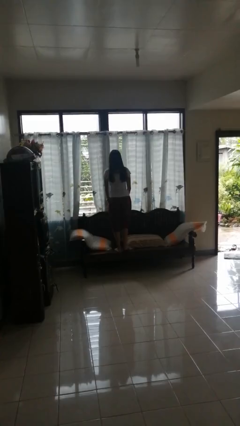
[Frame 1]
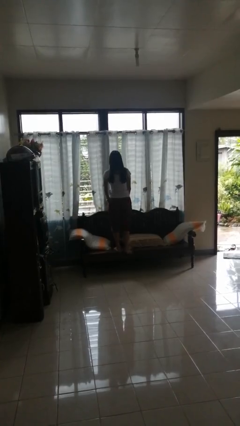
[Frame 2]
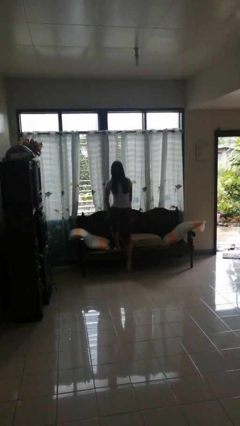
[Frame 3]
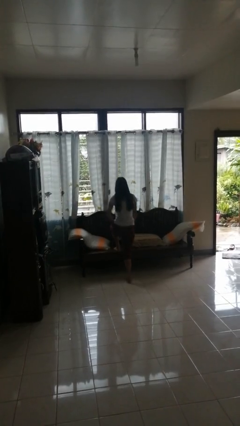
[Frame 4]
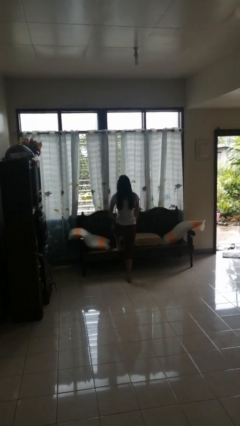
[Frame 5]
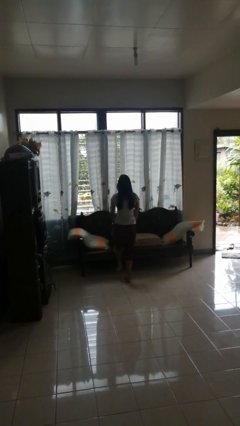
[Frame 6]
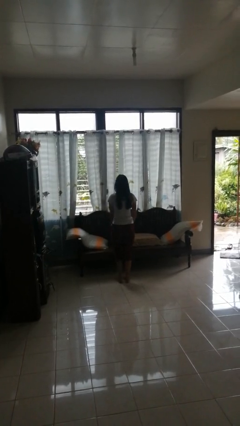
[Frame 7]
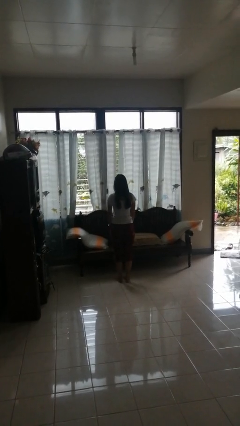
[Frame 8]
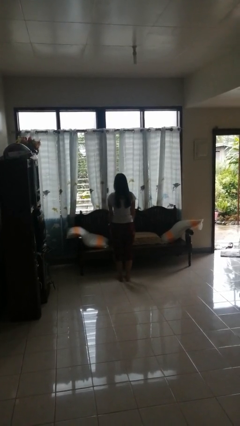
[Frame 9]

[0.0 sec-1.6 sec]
person climbs off couch

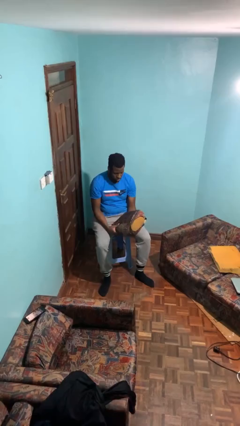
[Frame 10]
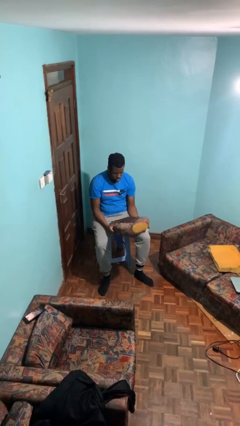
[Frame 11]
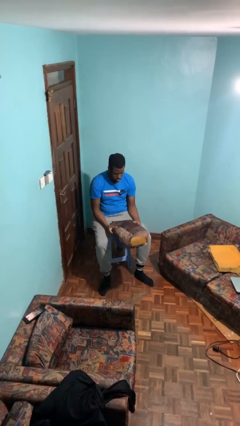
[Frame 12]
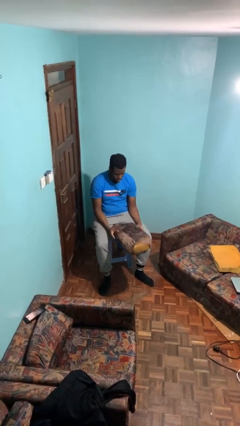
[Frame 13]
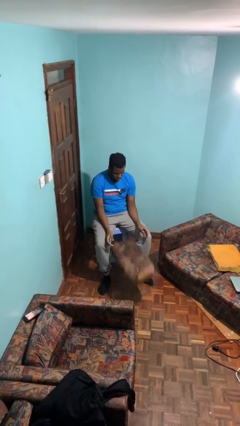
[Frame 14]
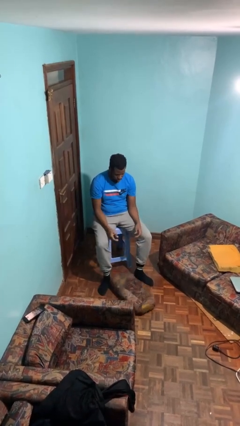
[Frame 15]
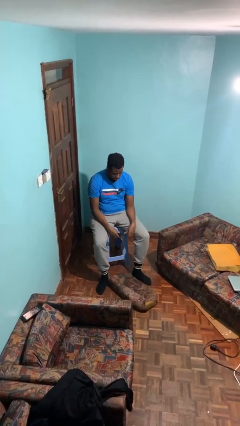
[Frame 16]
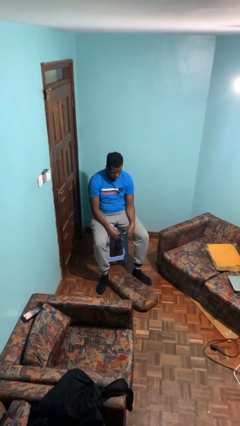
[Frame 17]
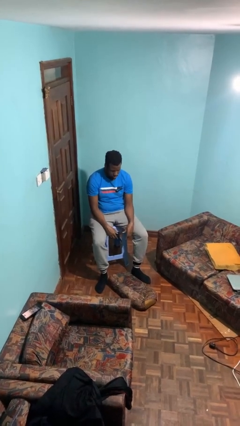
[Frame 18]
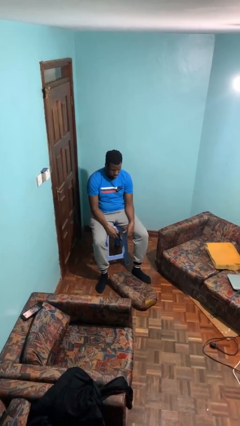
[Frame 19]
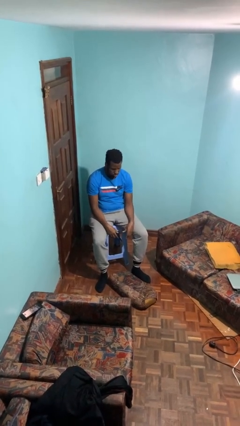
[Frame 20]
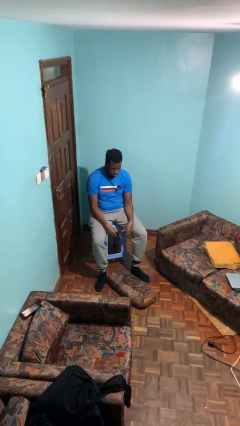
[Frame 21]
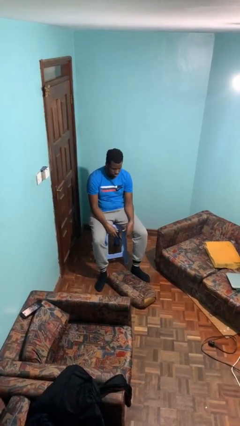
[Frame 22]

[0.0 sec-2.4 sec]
person drops object

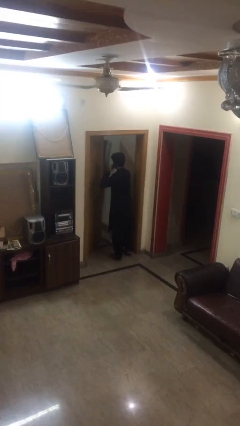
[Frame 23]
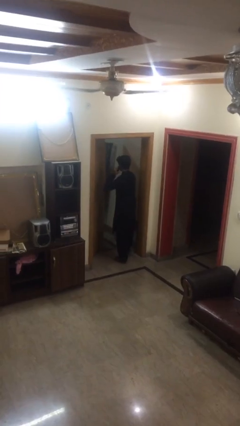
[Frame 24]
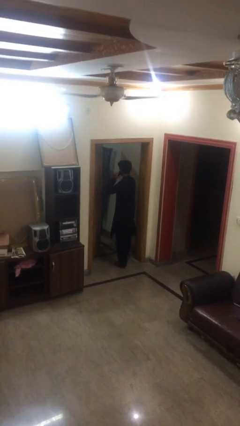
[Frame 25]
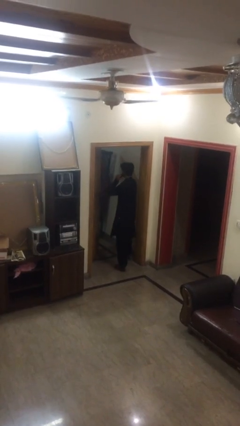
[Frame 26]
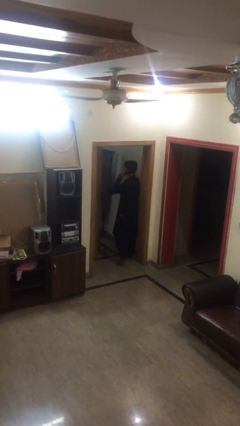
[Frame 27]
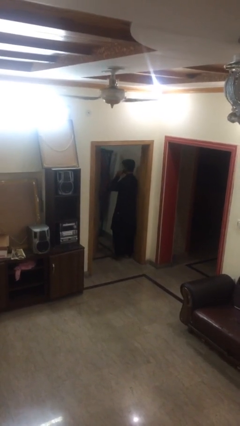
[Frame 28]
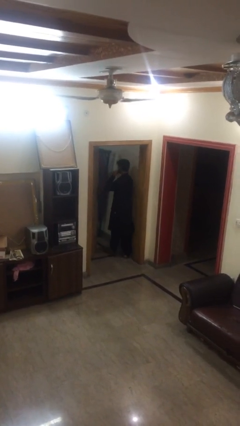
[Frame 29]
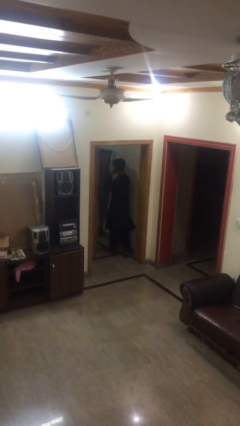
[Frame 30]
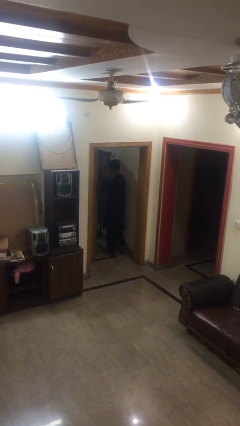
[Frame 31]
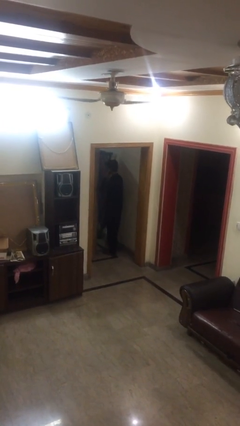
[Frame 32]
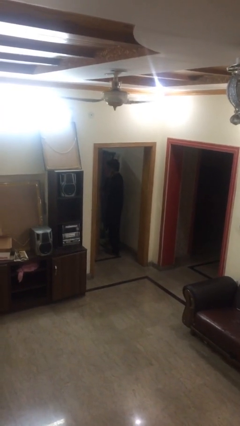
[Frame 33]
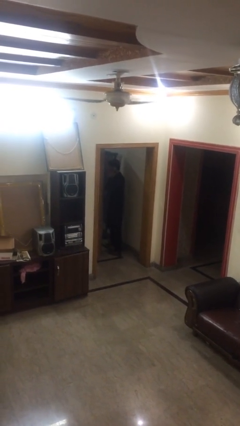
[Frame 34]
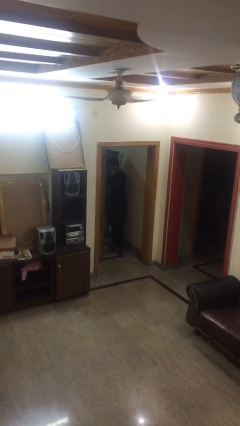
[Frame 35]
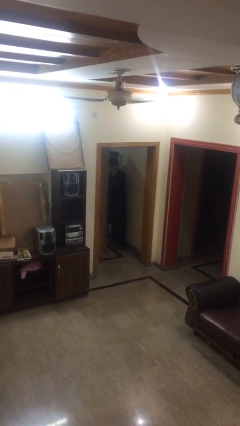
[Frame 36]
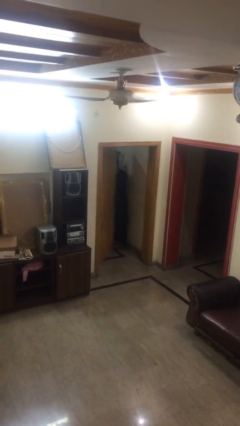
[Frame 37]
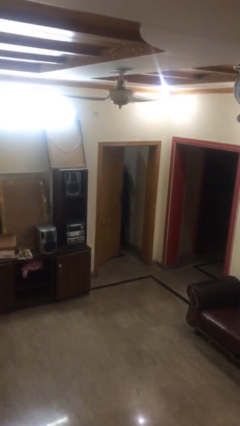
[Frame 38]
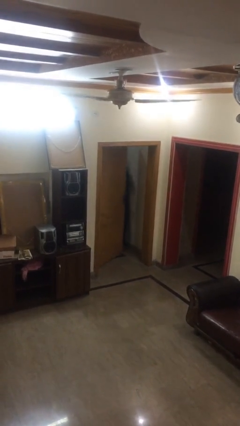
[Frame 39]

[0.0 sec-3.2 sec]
person exits scene through structure

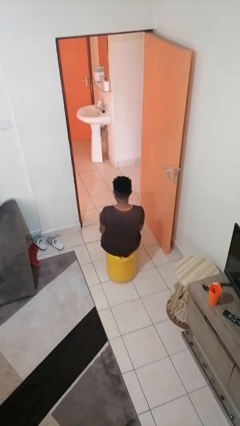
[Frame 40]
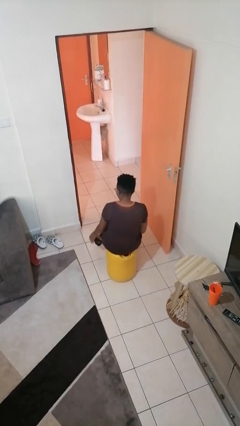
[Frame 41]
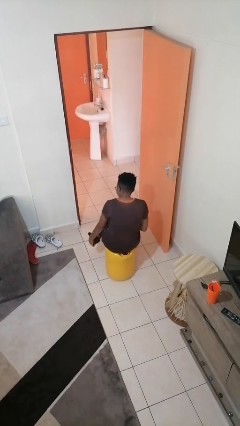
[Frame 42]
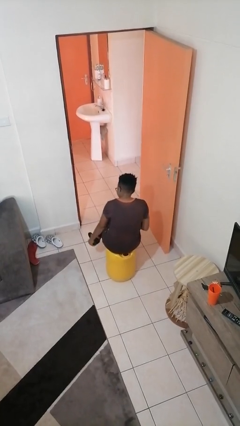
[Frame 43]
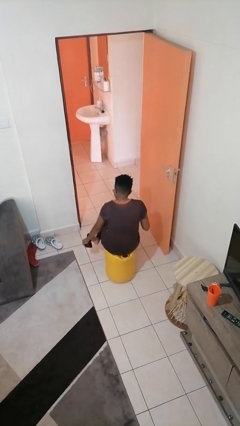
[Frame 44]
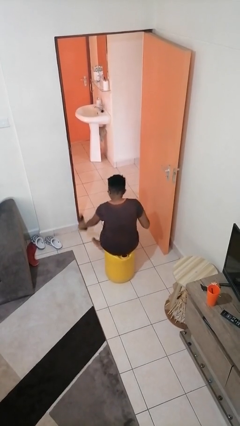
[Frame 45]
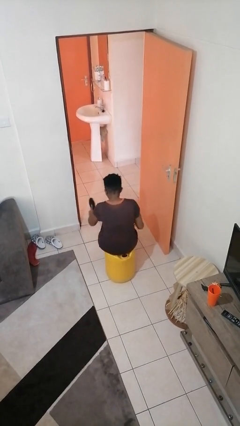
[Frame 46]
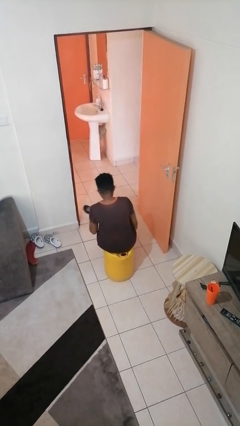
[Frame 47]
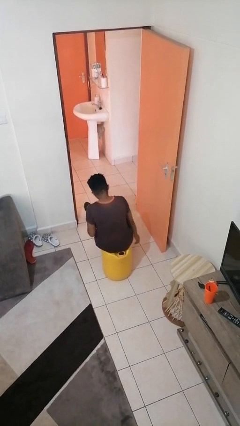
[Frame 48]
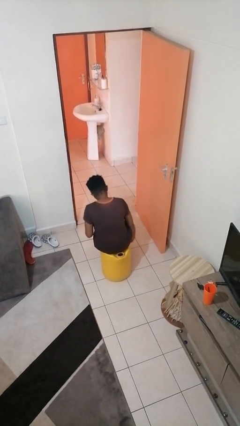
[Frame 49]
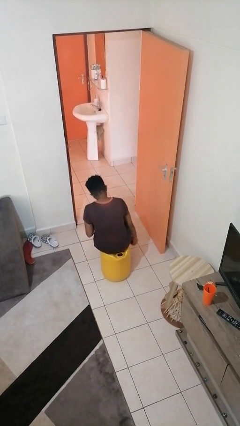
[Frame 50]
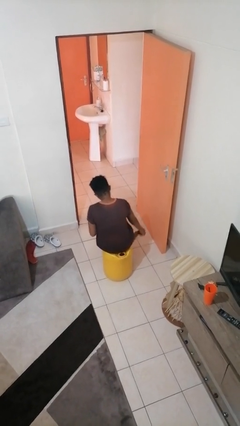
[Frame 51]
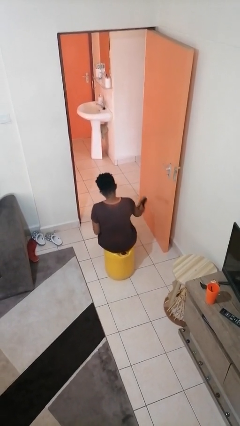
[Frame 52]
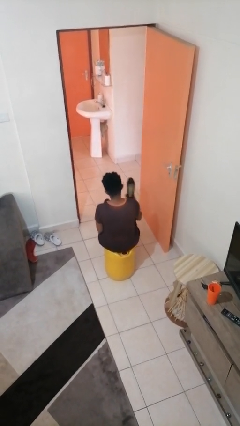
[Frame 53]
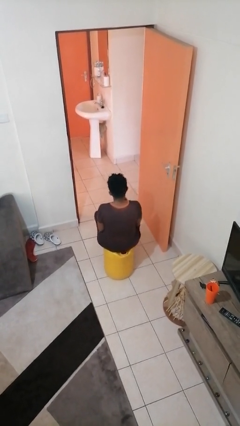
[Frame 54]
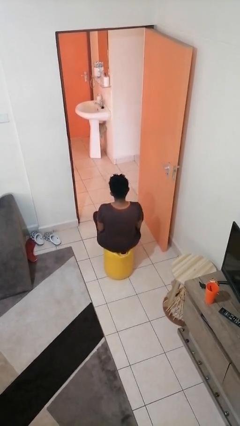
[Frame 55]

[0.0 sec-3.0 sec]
person takes off shoes

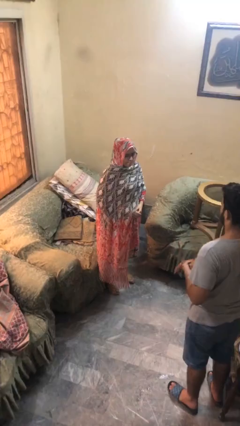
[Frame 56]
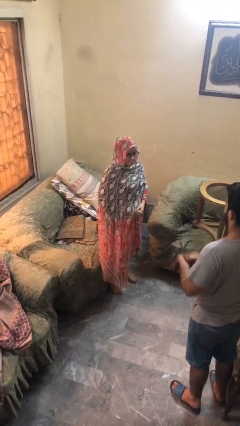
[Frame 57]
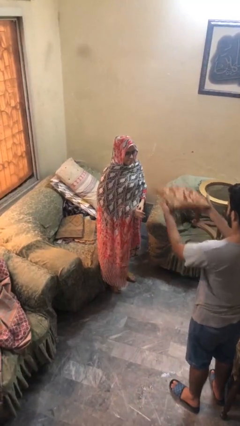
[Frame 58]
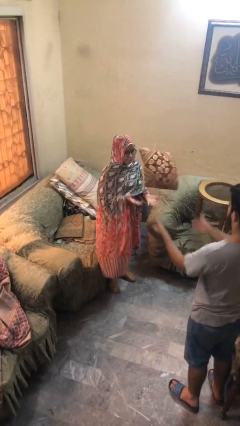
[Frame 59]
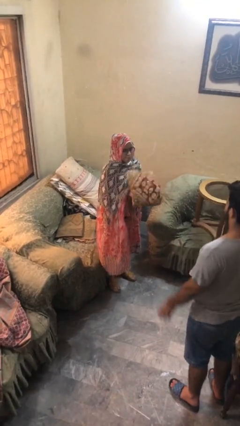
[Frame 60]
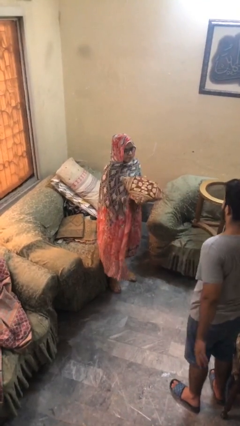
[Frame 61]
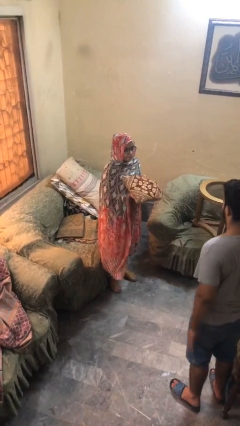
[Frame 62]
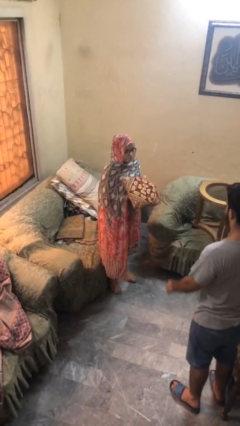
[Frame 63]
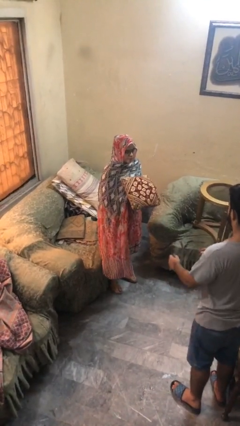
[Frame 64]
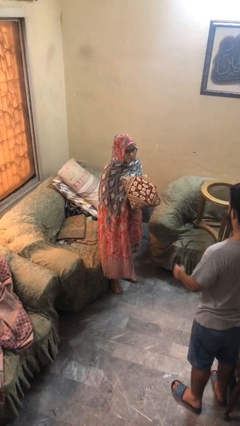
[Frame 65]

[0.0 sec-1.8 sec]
person catches object from person

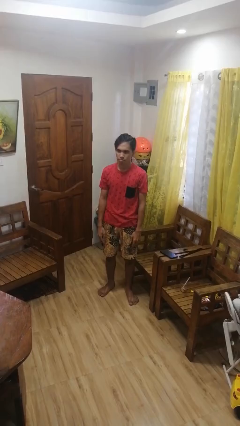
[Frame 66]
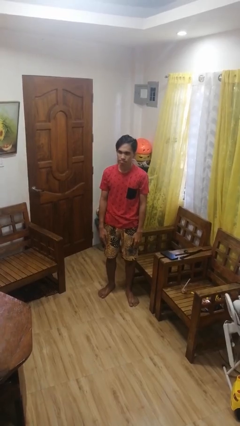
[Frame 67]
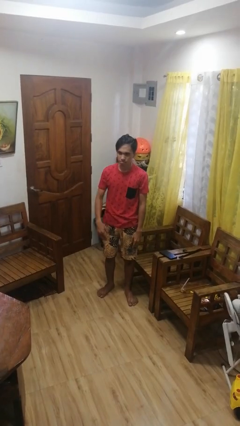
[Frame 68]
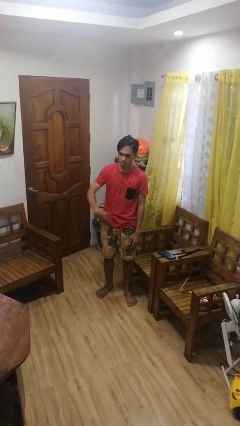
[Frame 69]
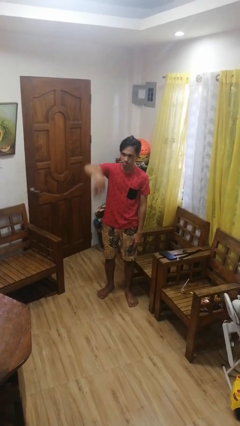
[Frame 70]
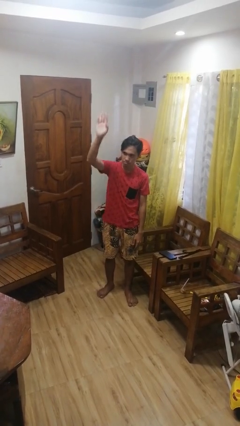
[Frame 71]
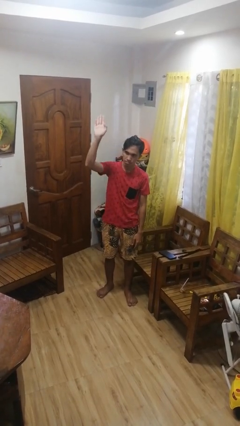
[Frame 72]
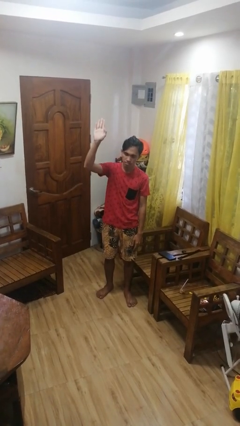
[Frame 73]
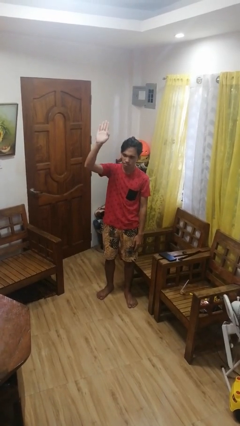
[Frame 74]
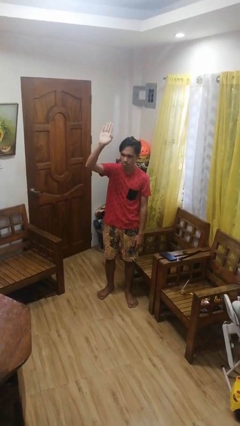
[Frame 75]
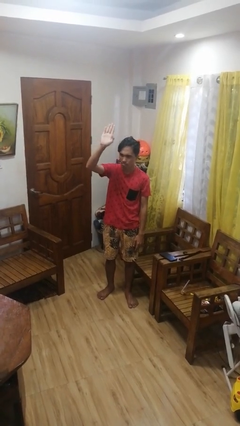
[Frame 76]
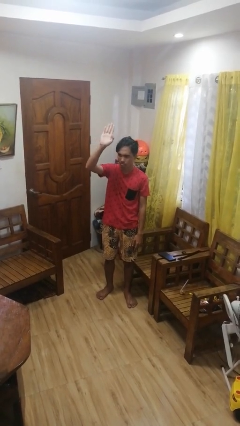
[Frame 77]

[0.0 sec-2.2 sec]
person gestures swipe up

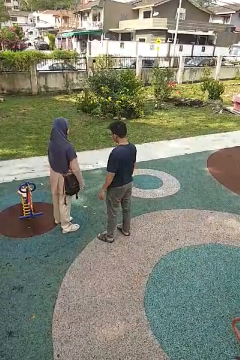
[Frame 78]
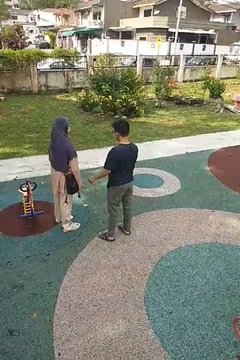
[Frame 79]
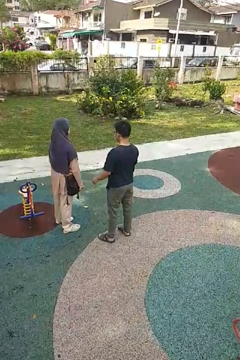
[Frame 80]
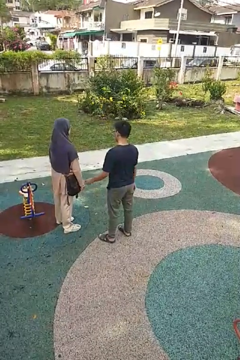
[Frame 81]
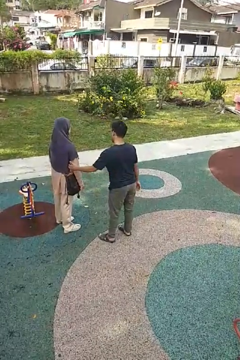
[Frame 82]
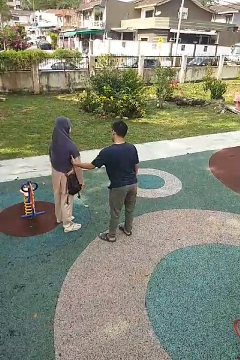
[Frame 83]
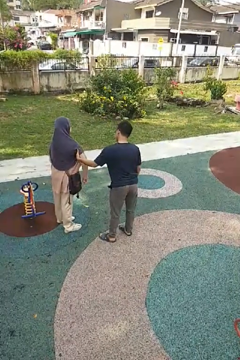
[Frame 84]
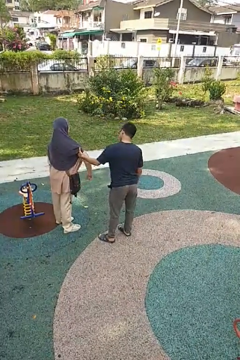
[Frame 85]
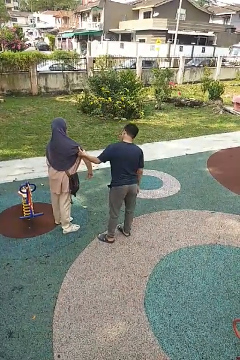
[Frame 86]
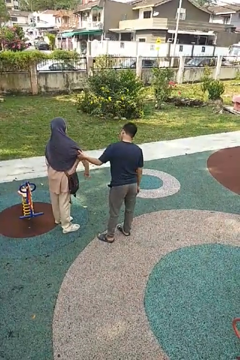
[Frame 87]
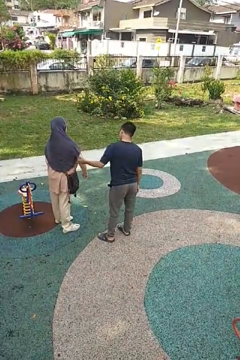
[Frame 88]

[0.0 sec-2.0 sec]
person grabs person by bicep

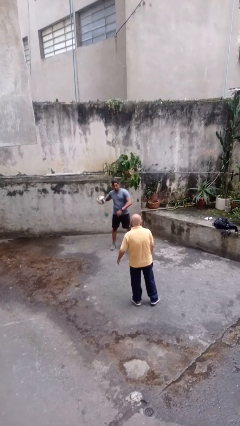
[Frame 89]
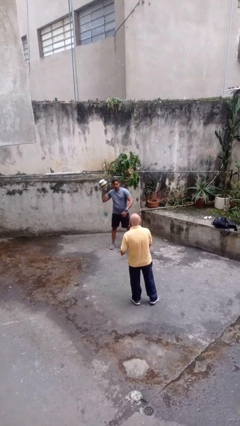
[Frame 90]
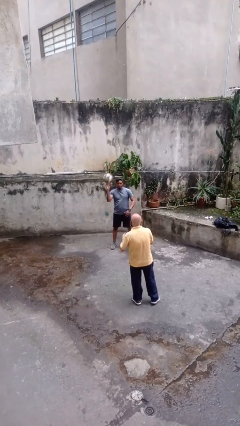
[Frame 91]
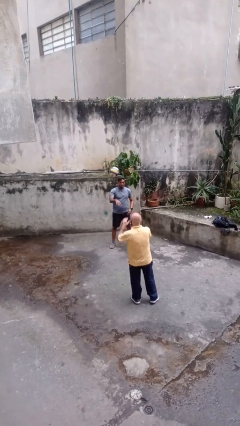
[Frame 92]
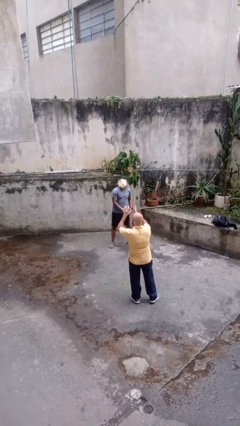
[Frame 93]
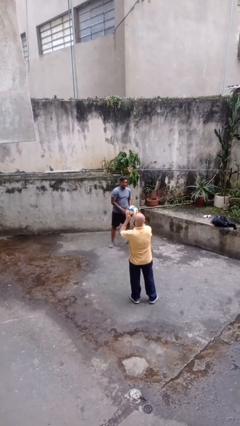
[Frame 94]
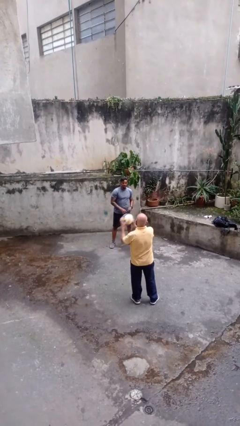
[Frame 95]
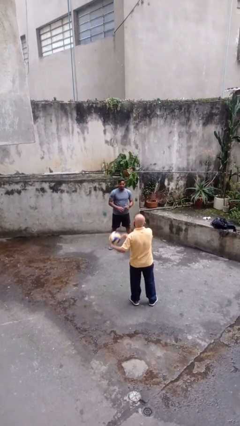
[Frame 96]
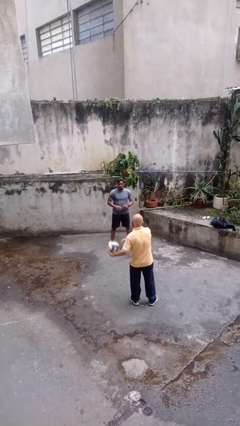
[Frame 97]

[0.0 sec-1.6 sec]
person throws object to person
